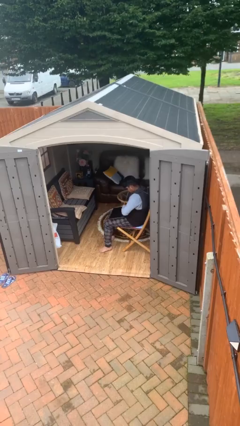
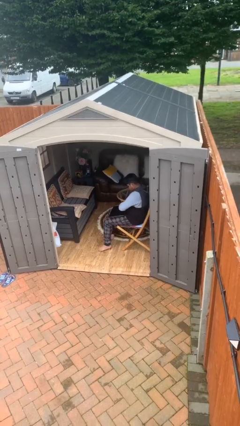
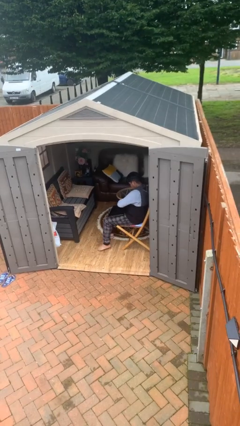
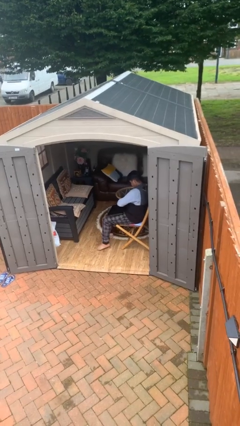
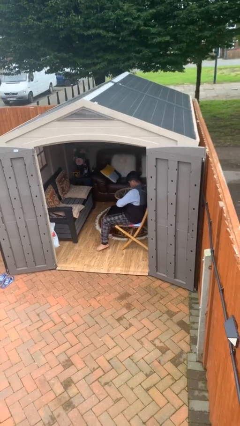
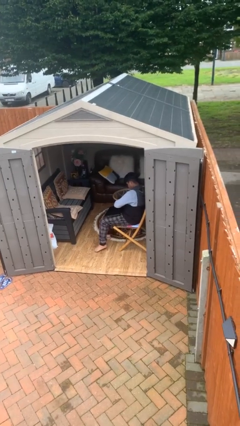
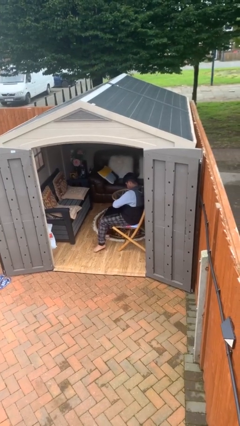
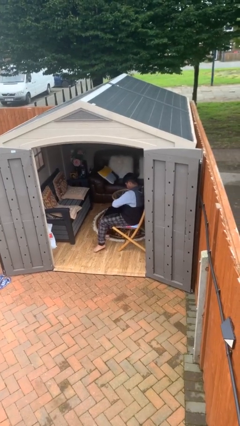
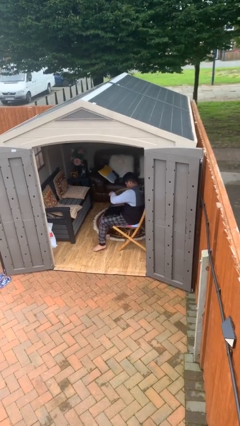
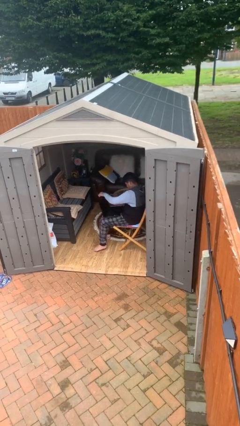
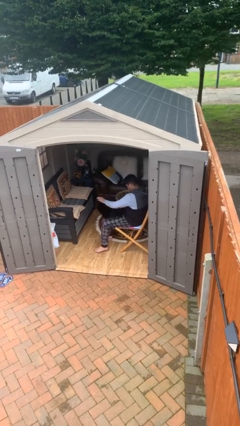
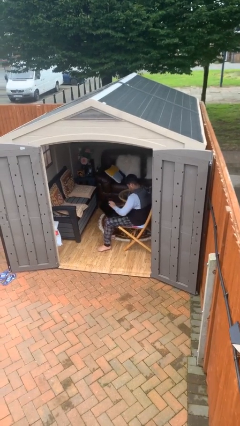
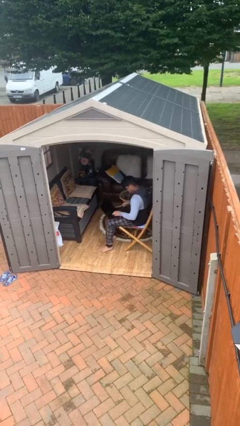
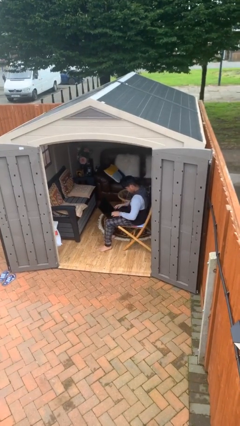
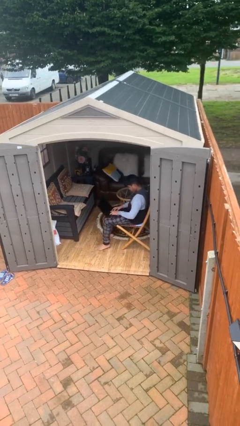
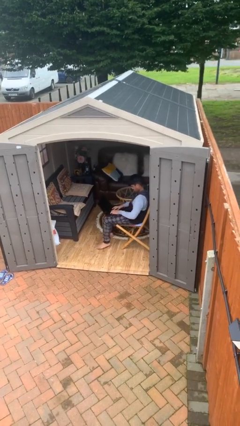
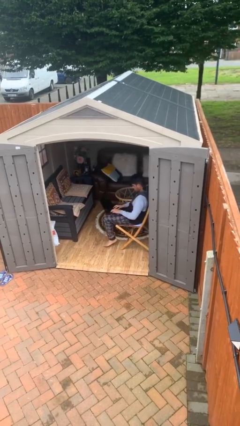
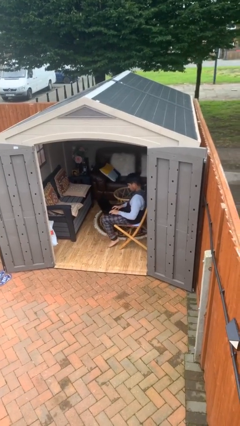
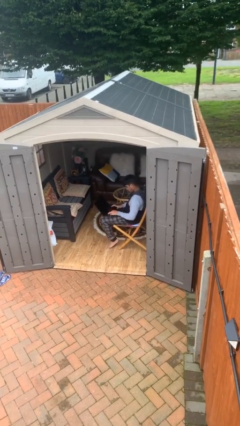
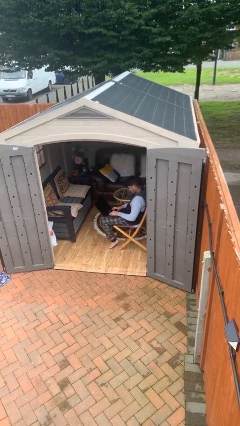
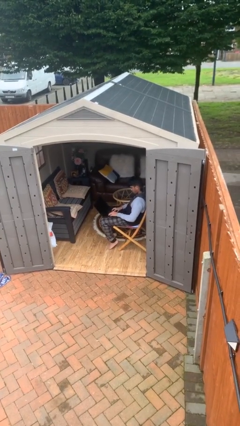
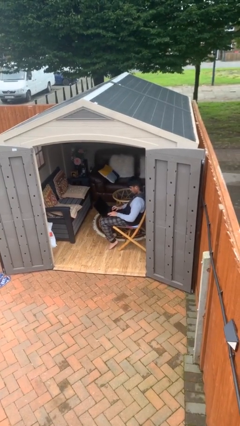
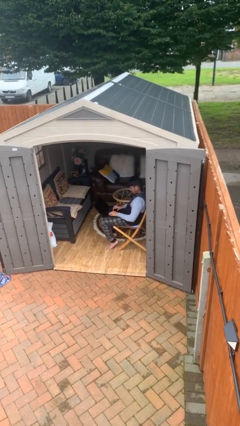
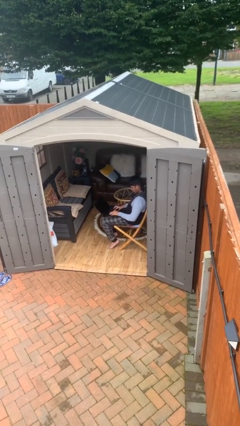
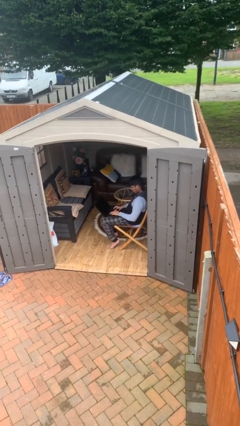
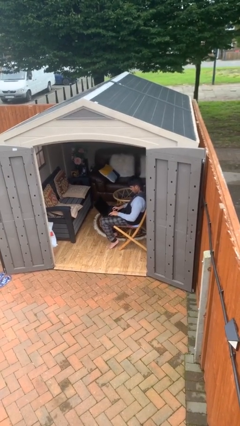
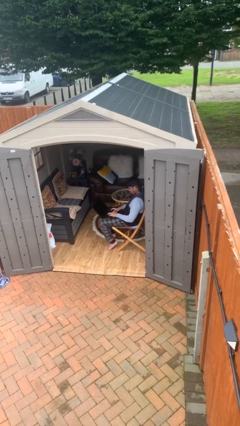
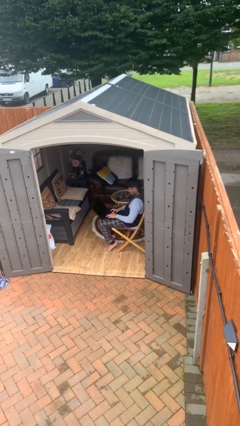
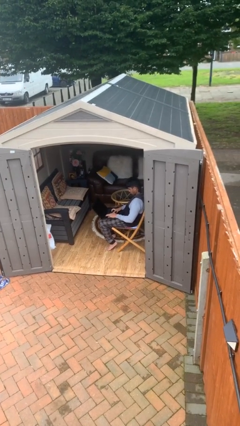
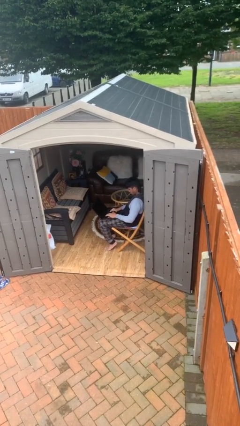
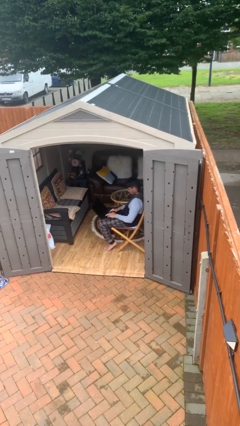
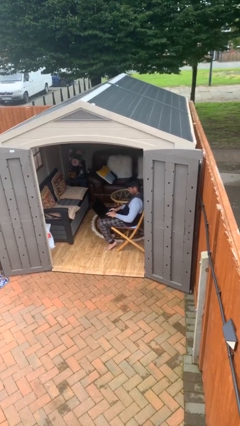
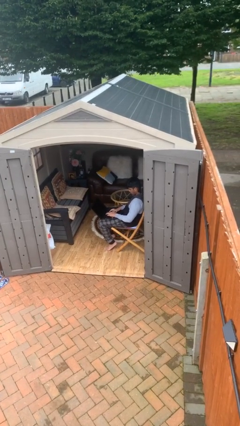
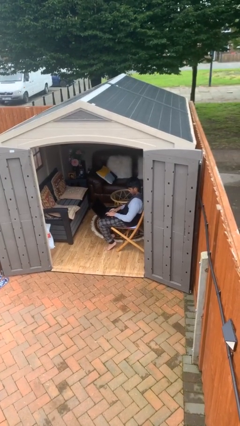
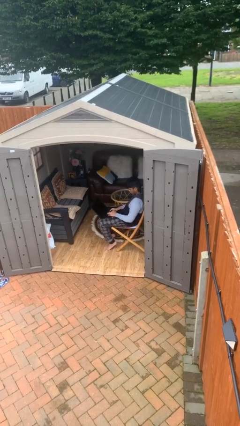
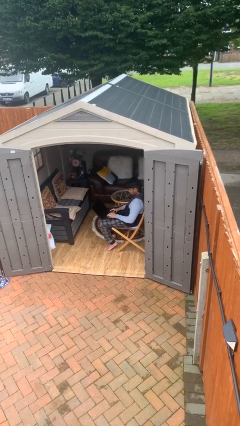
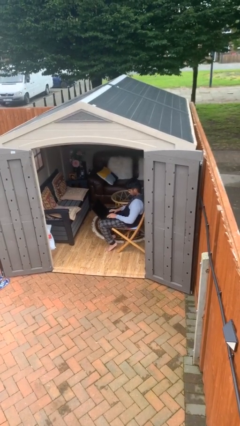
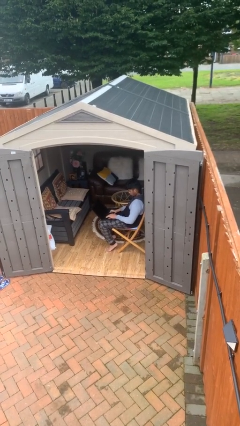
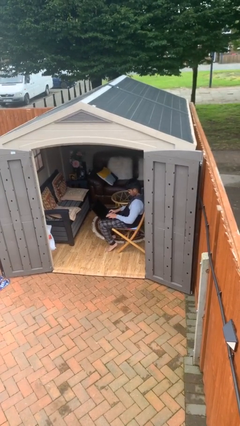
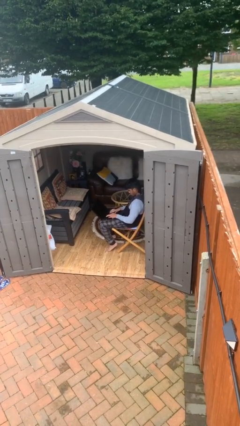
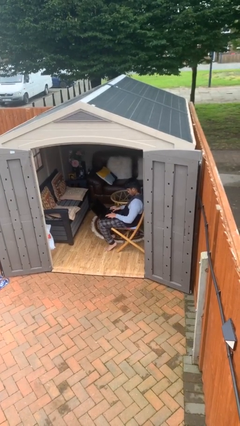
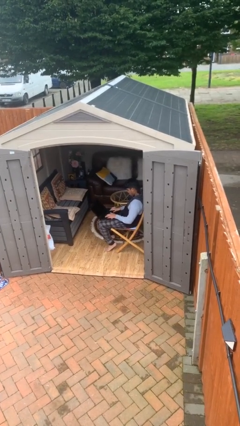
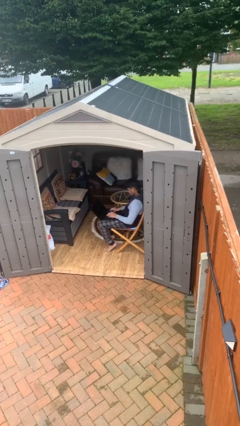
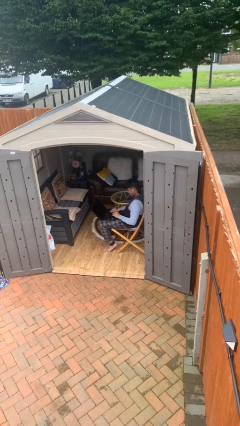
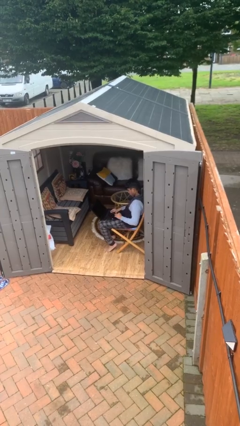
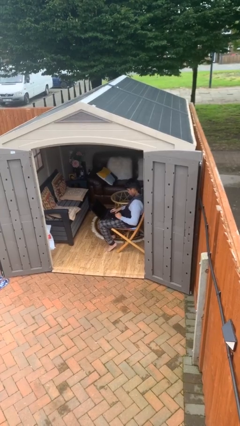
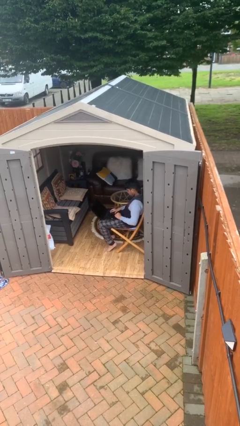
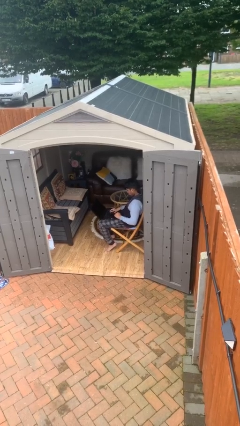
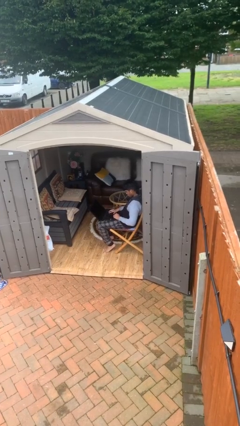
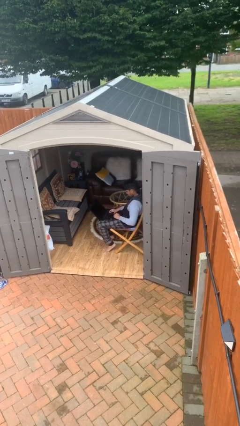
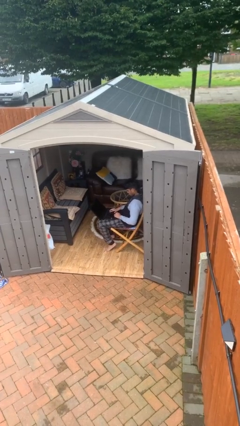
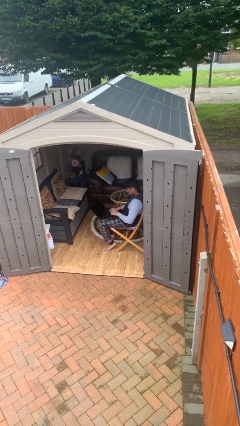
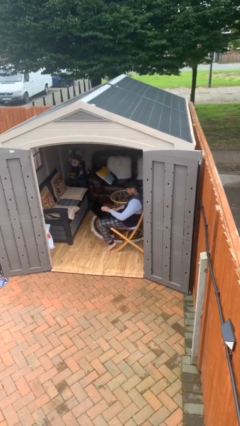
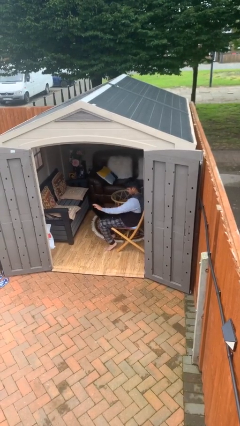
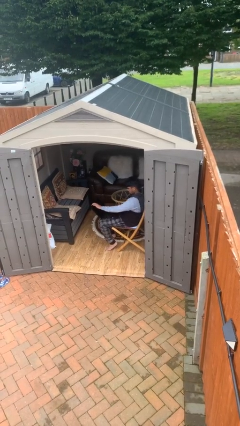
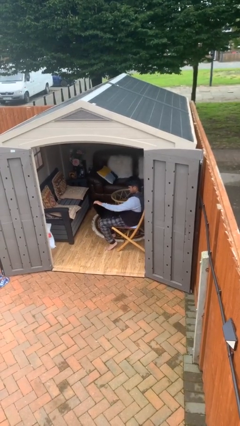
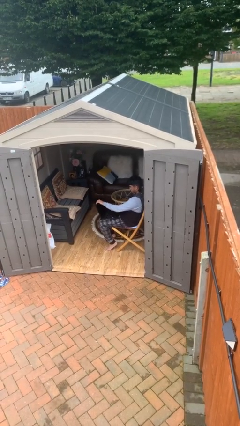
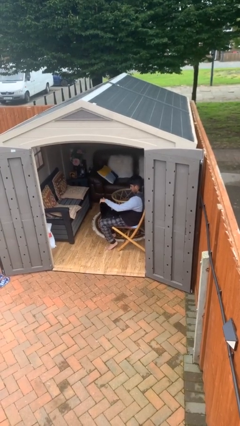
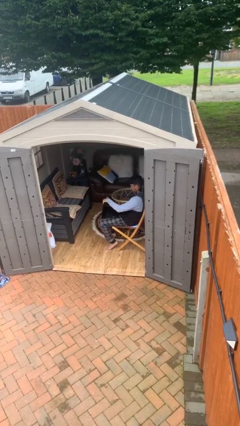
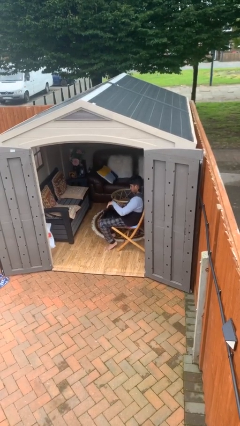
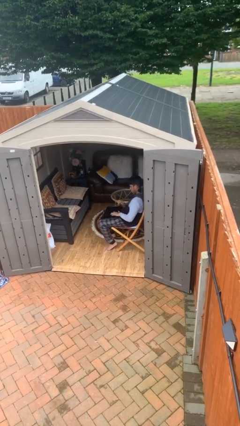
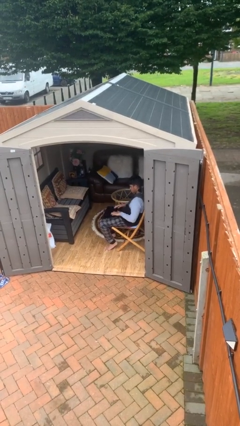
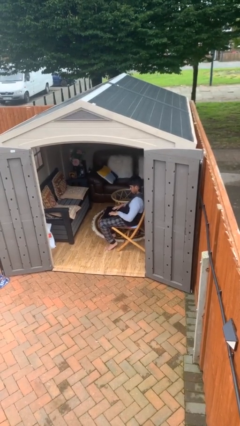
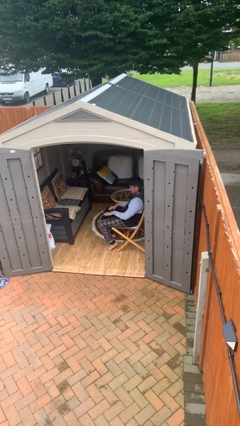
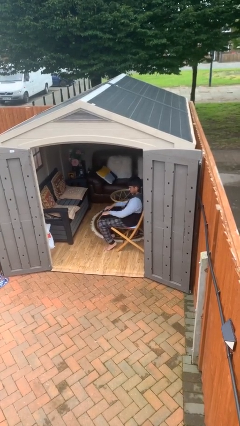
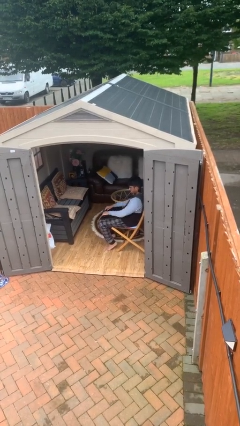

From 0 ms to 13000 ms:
person interacts with laptop

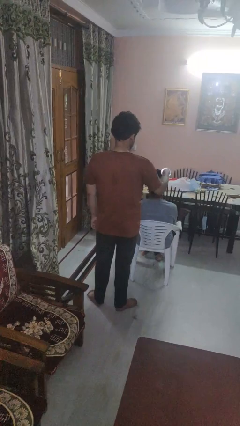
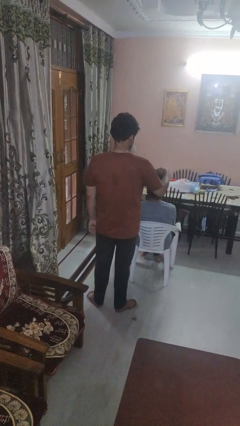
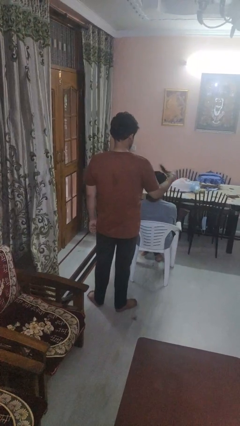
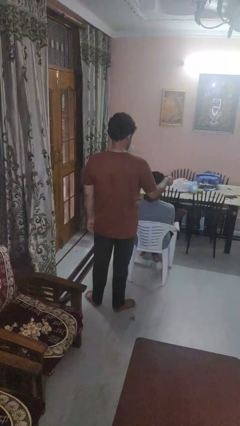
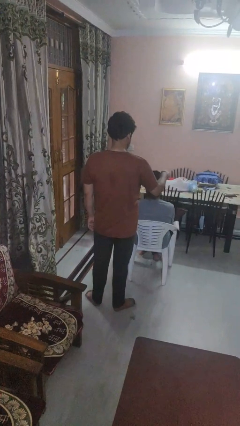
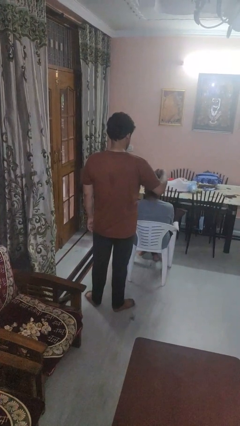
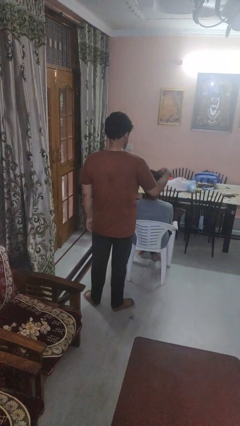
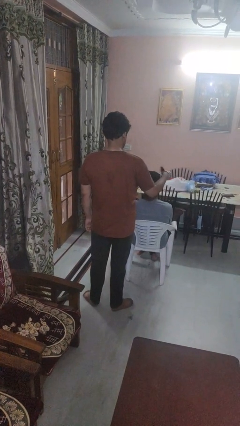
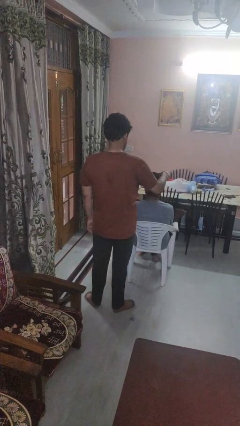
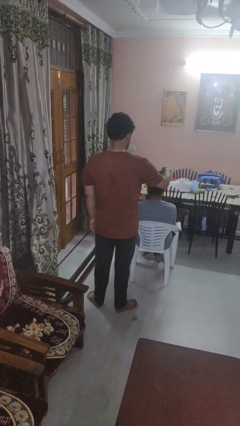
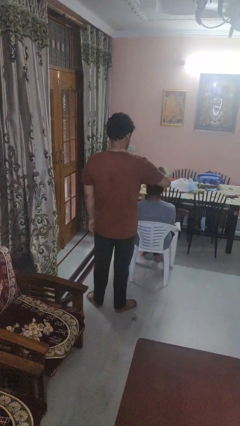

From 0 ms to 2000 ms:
person brushes hair of person

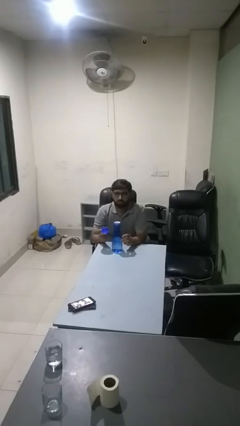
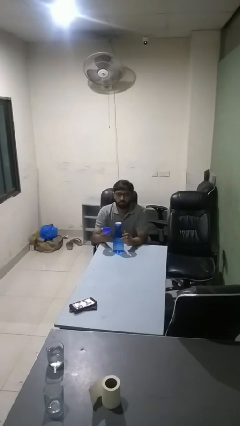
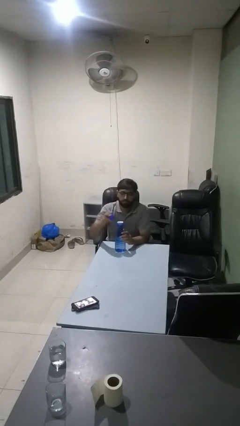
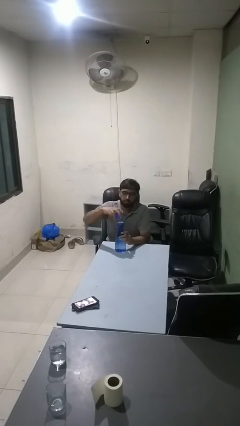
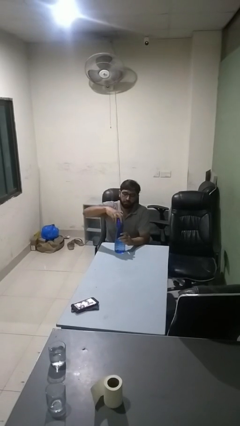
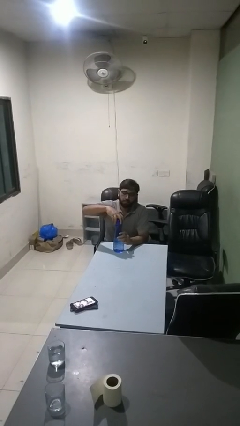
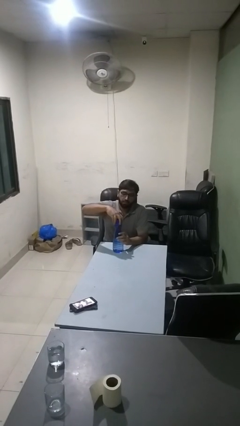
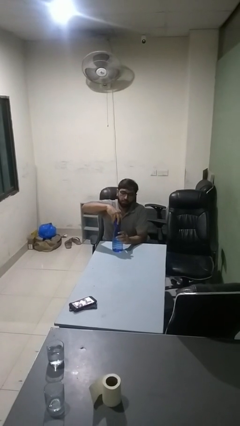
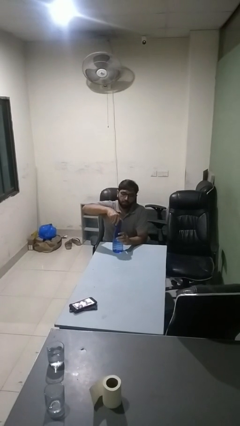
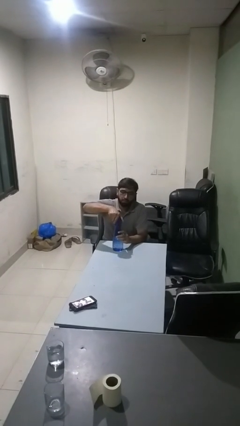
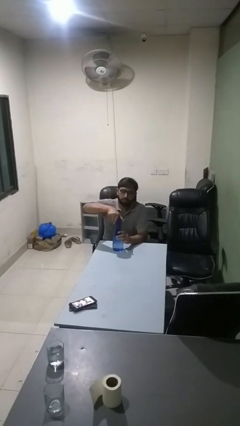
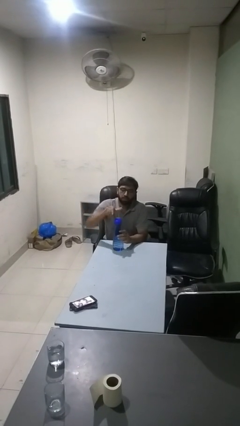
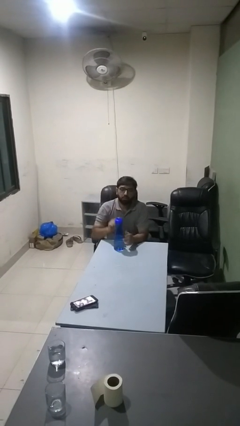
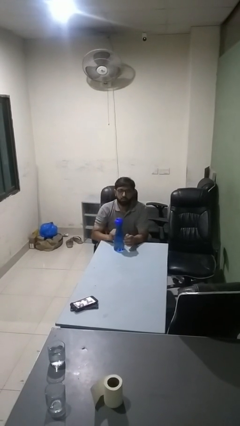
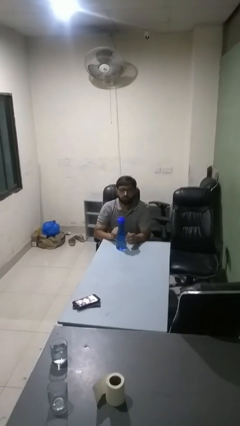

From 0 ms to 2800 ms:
person screws lid to bottle

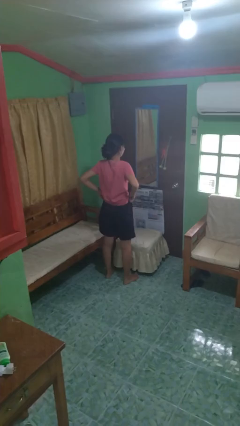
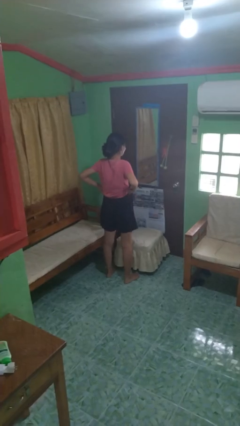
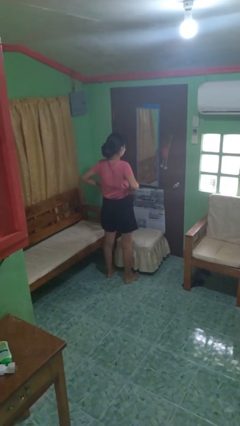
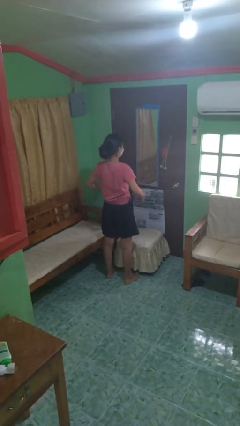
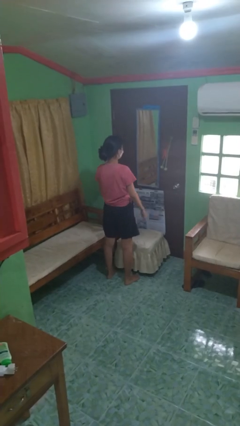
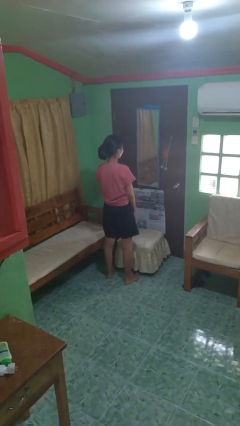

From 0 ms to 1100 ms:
person hikes up pants
